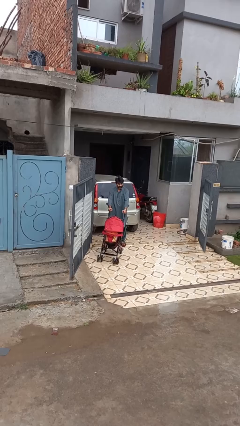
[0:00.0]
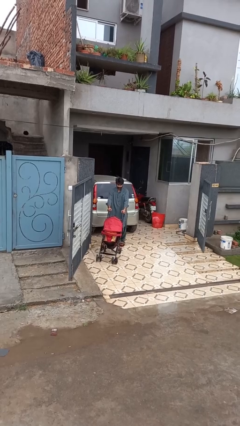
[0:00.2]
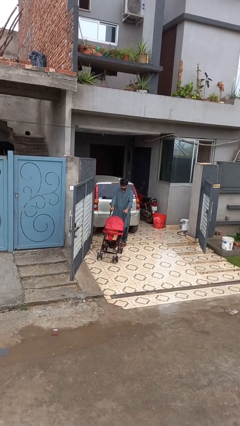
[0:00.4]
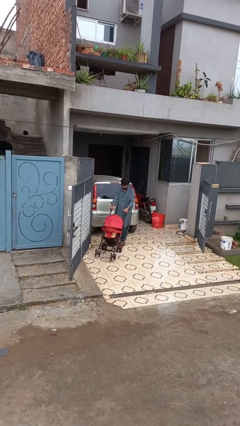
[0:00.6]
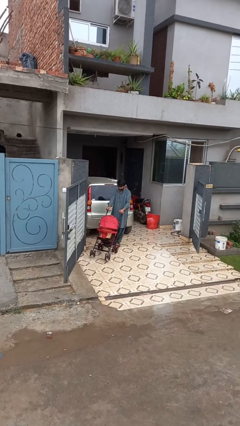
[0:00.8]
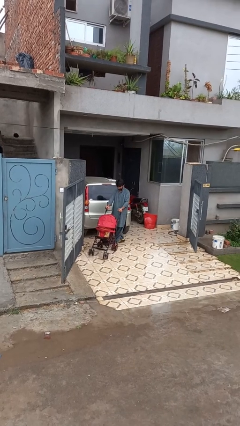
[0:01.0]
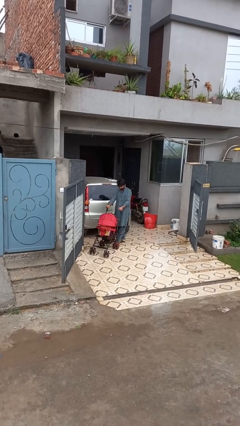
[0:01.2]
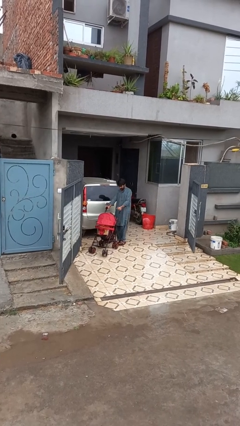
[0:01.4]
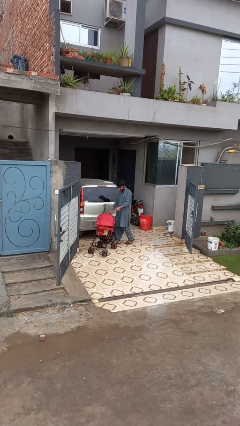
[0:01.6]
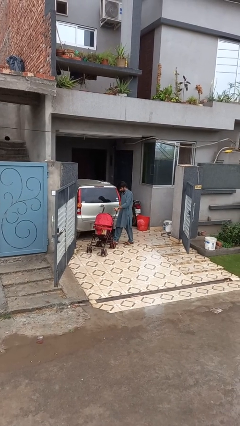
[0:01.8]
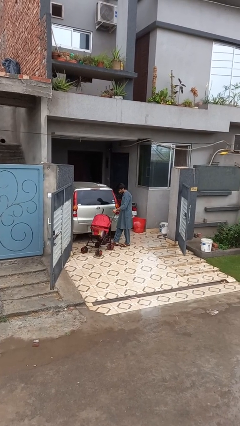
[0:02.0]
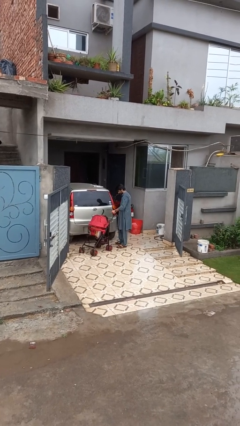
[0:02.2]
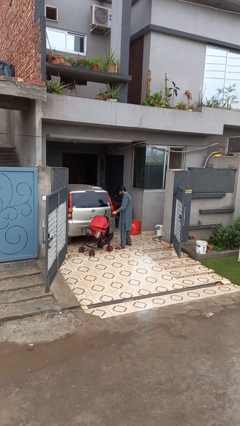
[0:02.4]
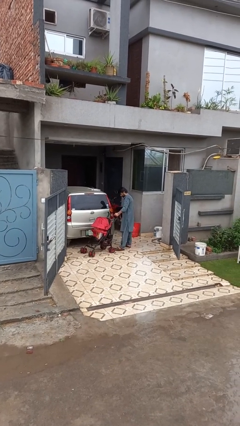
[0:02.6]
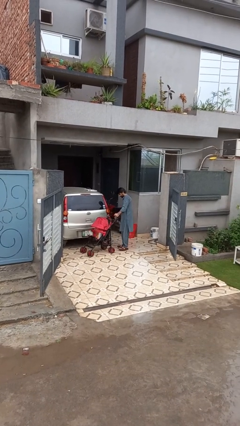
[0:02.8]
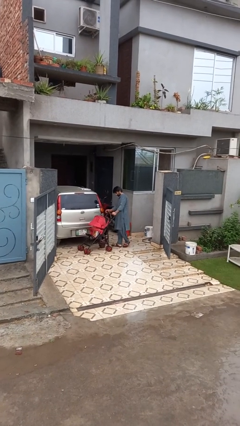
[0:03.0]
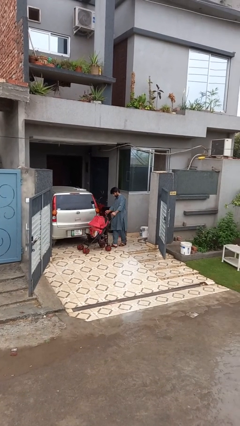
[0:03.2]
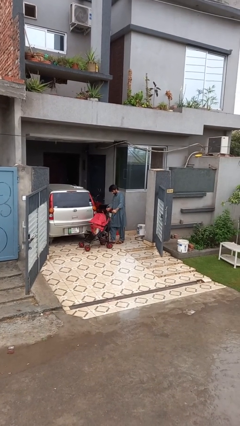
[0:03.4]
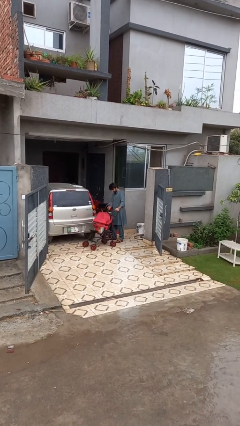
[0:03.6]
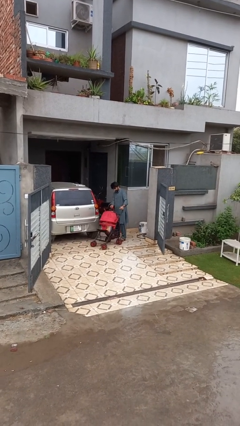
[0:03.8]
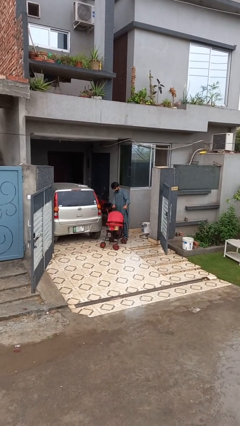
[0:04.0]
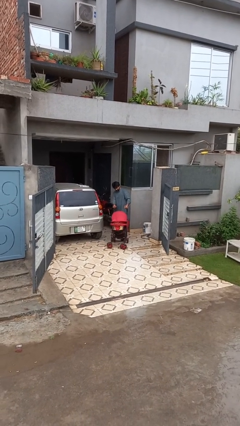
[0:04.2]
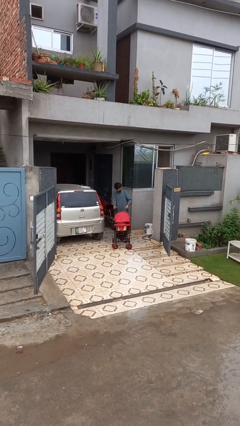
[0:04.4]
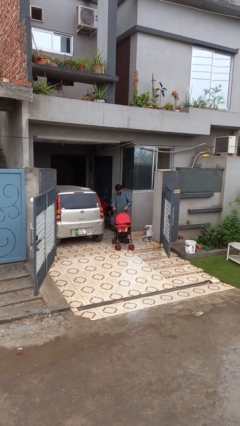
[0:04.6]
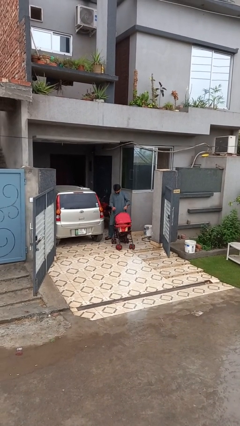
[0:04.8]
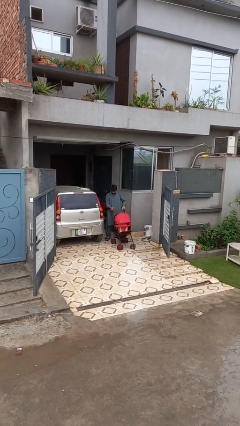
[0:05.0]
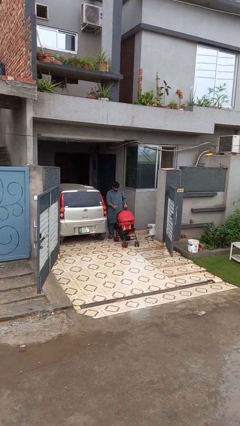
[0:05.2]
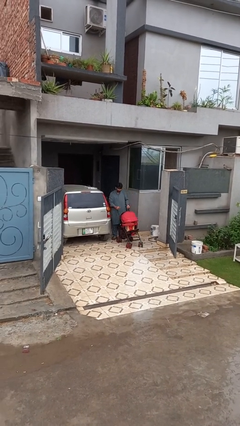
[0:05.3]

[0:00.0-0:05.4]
person pulls wheeled cart

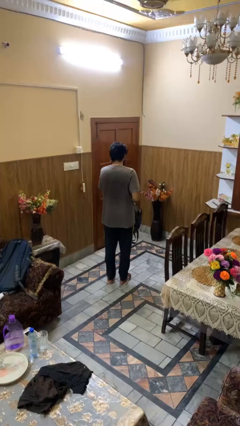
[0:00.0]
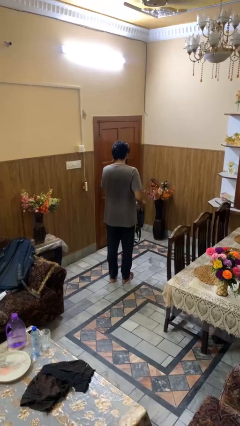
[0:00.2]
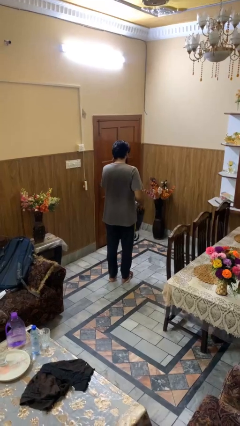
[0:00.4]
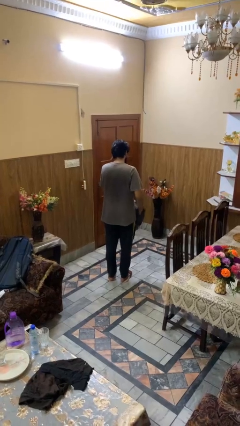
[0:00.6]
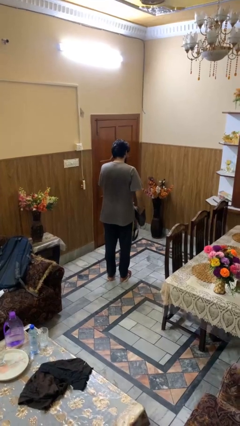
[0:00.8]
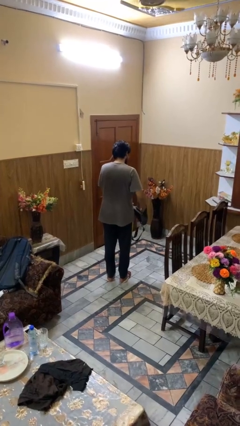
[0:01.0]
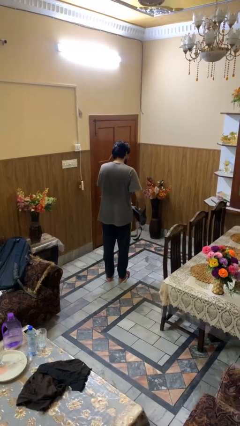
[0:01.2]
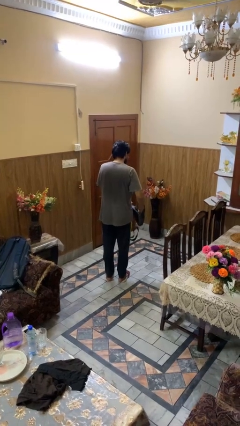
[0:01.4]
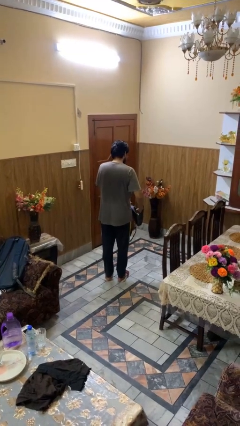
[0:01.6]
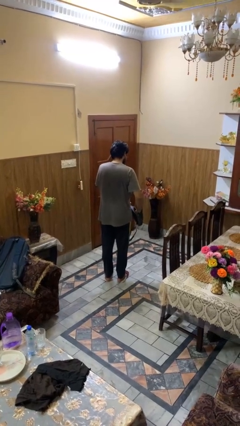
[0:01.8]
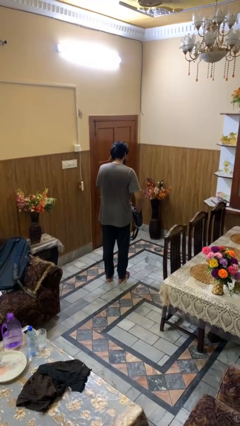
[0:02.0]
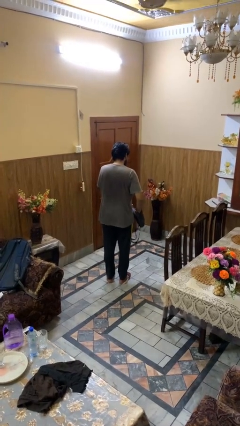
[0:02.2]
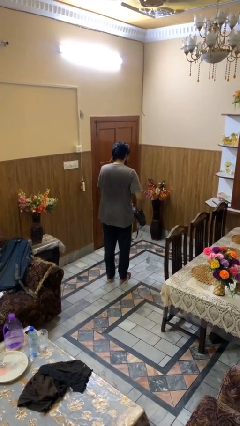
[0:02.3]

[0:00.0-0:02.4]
person searches in purse

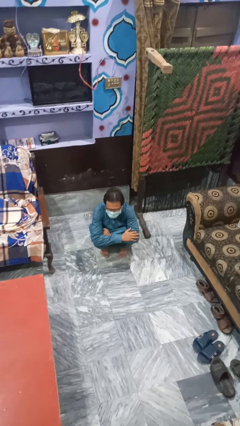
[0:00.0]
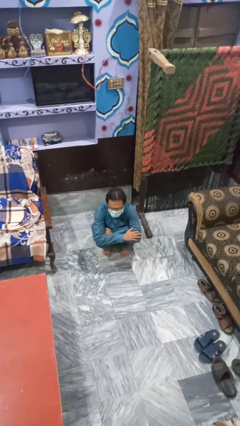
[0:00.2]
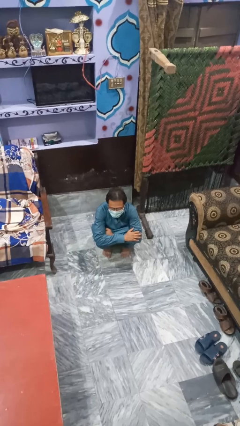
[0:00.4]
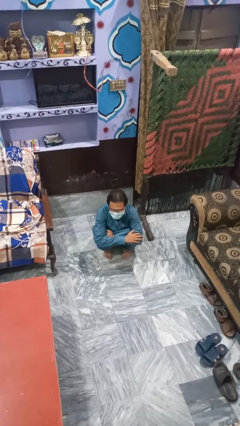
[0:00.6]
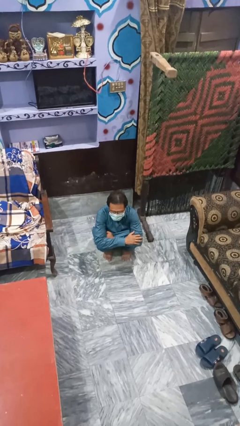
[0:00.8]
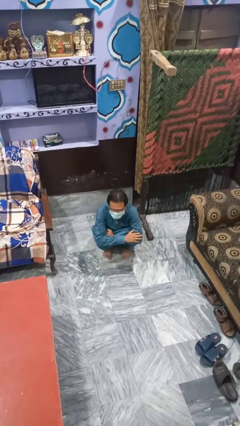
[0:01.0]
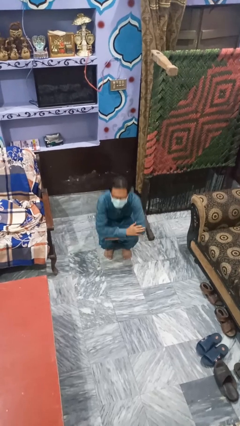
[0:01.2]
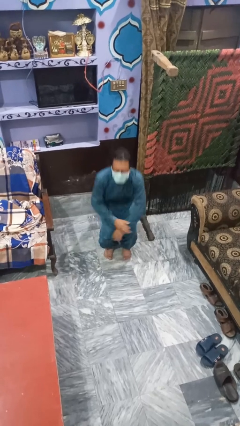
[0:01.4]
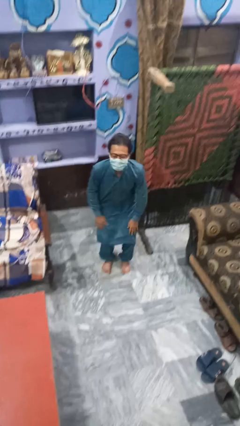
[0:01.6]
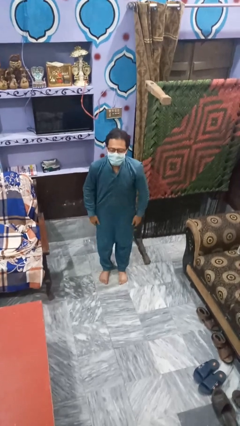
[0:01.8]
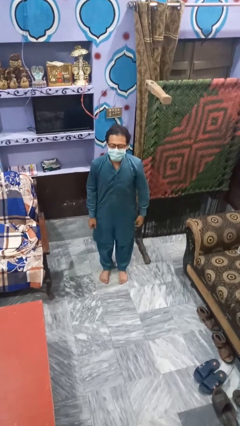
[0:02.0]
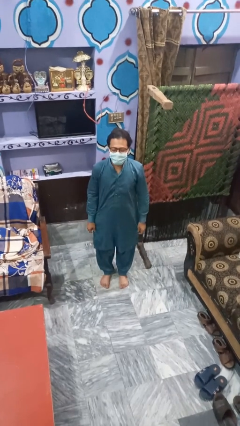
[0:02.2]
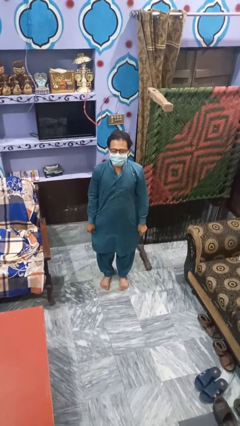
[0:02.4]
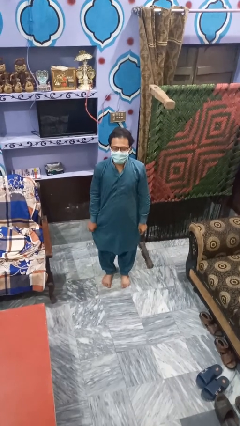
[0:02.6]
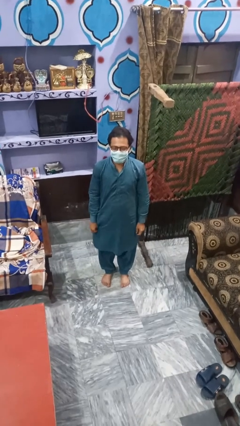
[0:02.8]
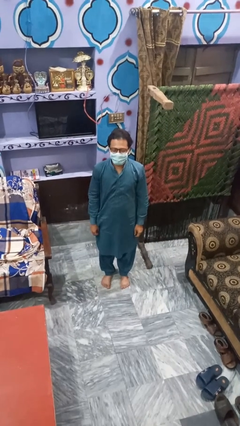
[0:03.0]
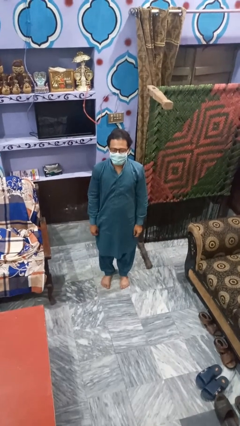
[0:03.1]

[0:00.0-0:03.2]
person stands up

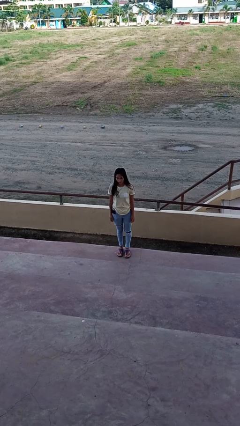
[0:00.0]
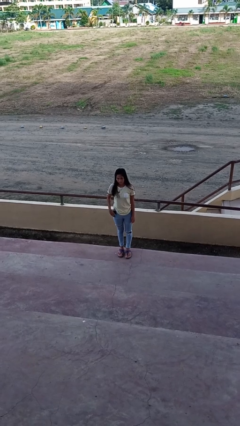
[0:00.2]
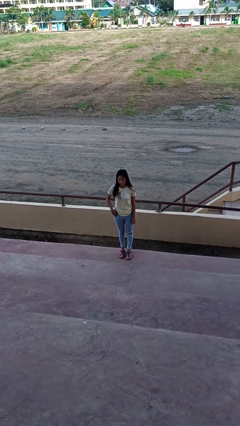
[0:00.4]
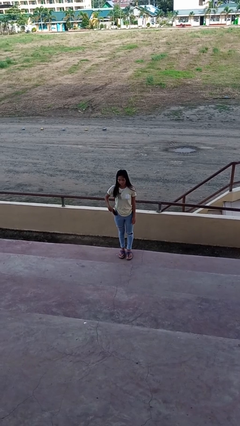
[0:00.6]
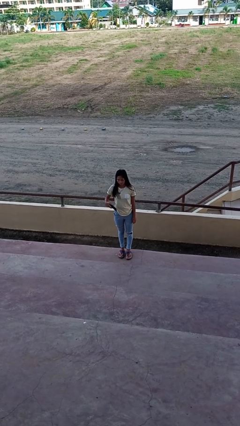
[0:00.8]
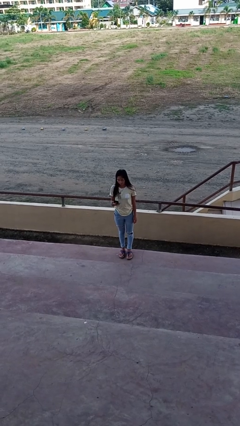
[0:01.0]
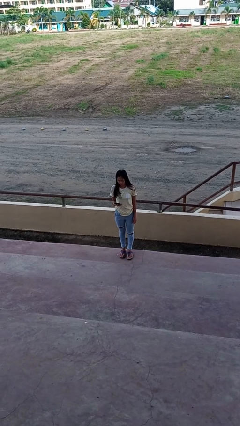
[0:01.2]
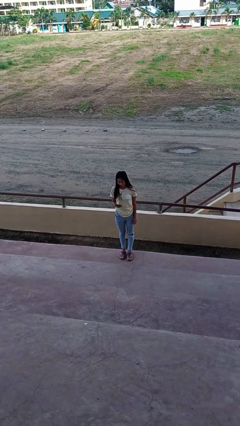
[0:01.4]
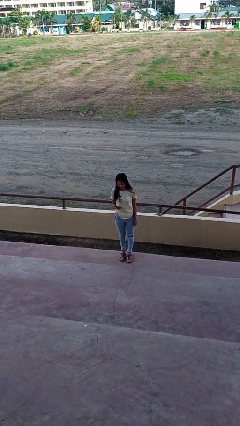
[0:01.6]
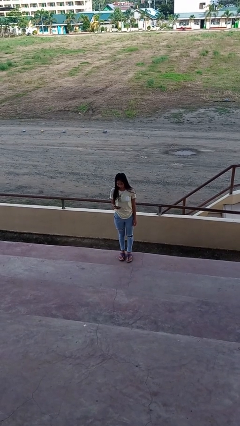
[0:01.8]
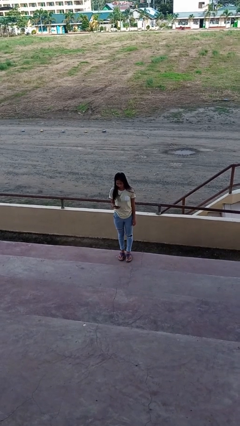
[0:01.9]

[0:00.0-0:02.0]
person takes phone from pocket

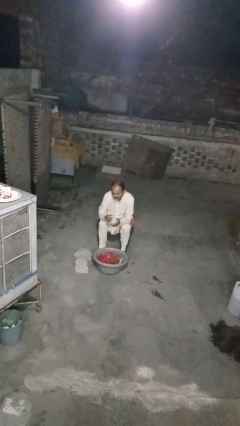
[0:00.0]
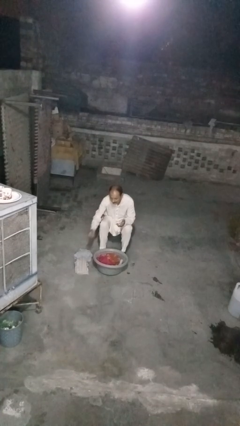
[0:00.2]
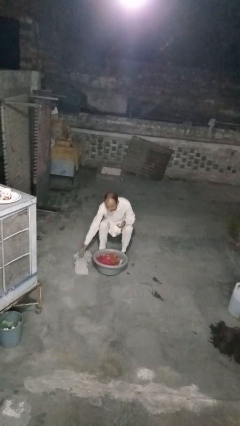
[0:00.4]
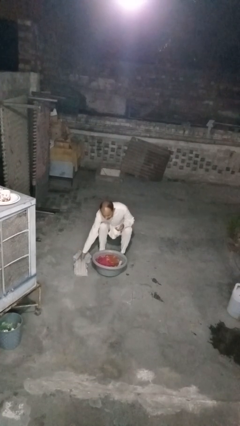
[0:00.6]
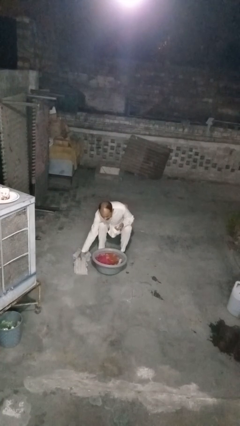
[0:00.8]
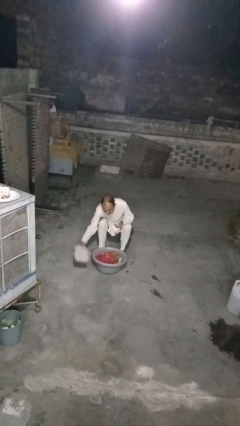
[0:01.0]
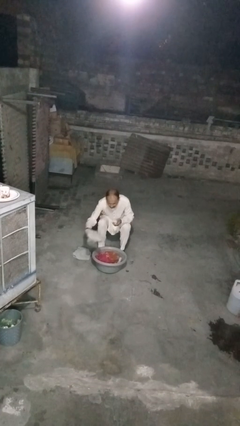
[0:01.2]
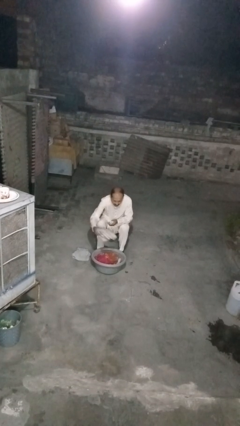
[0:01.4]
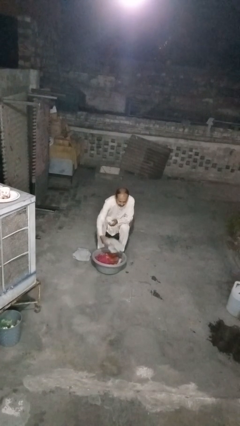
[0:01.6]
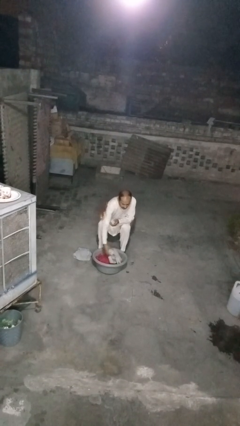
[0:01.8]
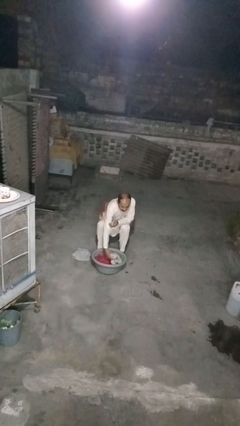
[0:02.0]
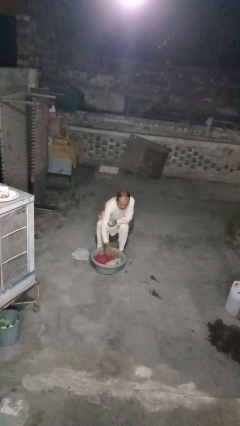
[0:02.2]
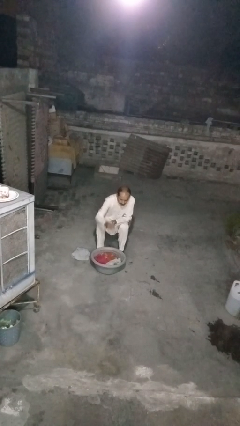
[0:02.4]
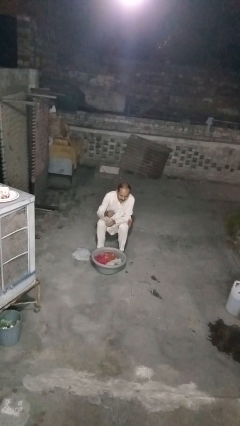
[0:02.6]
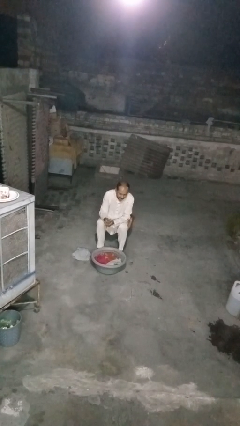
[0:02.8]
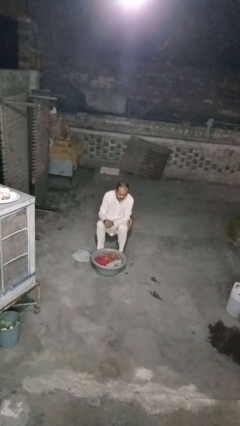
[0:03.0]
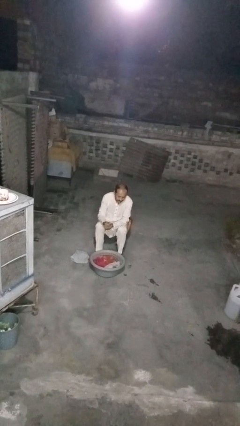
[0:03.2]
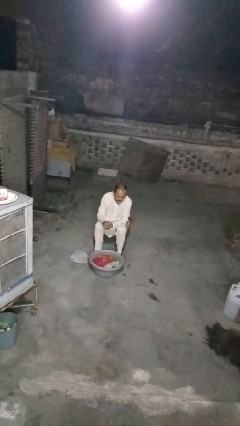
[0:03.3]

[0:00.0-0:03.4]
person puts object into basket

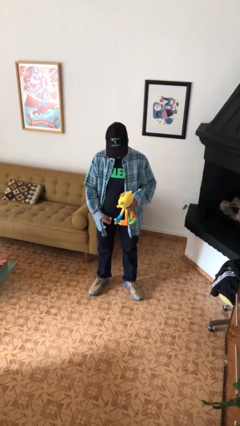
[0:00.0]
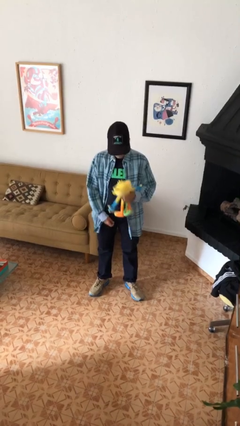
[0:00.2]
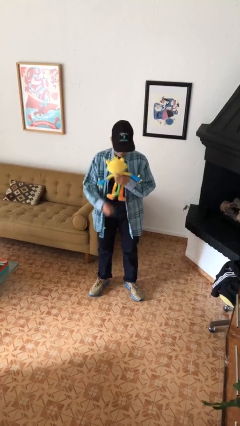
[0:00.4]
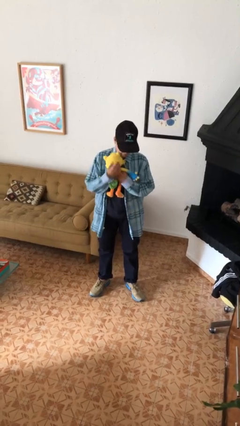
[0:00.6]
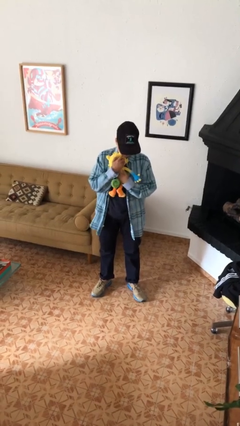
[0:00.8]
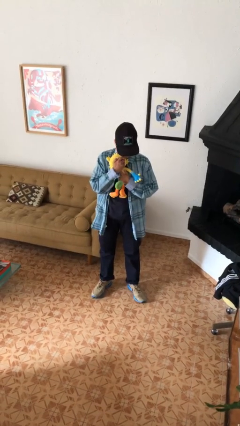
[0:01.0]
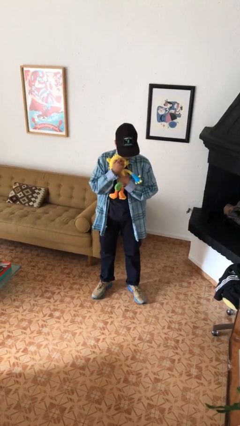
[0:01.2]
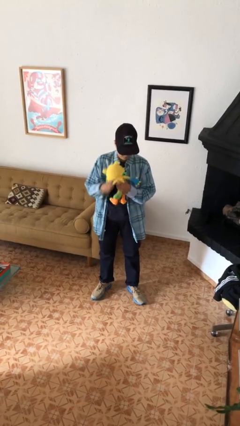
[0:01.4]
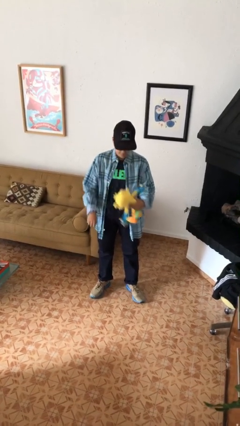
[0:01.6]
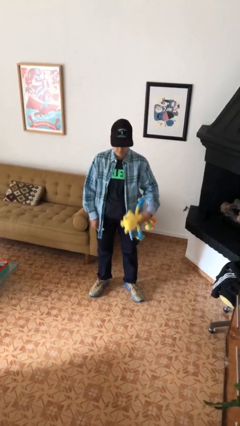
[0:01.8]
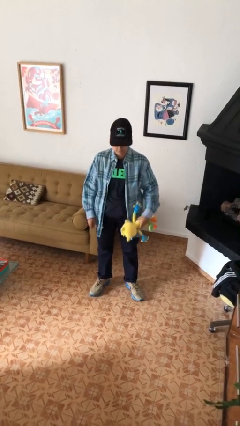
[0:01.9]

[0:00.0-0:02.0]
person hugs stuffed animal
